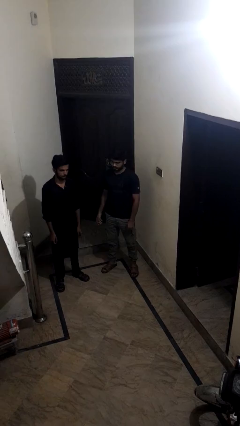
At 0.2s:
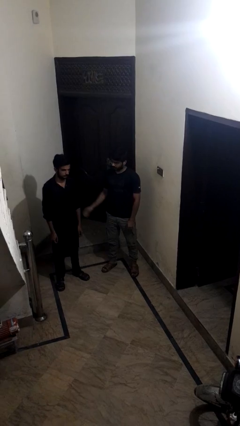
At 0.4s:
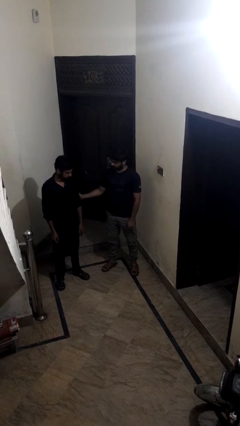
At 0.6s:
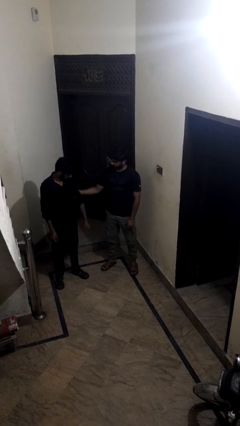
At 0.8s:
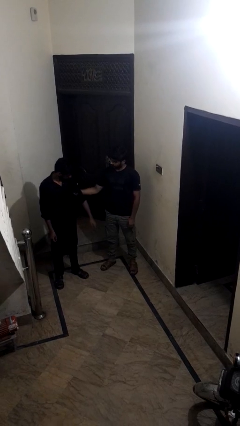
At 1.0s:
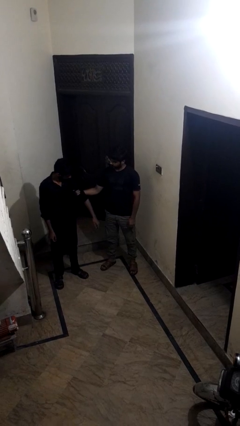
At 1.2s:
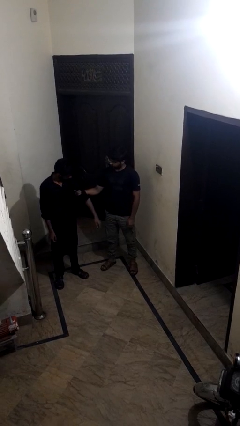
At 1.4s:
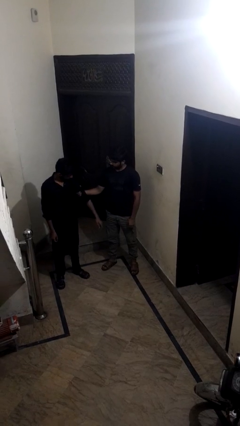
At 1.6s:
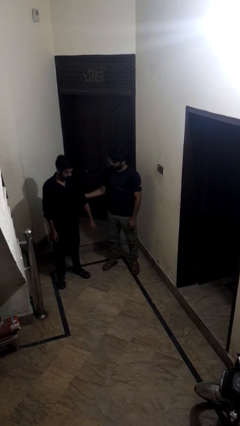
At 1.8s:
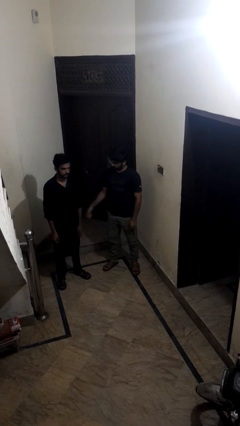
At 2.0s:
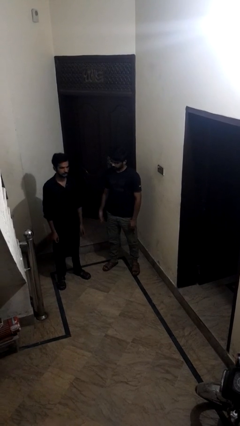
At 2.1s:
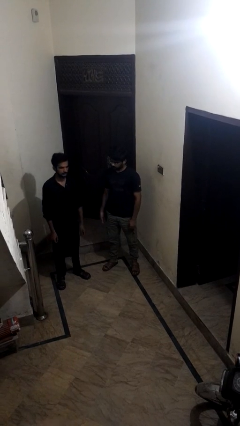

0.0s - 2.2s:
person grabs person by bicep

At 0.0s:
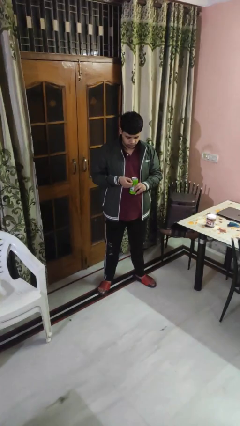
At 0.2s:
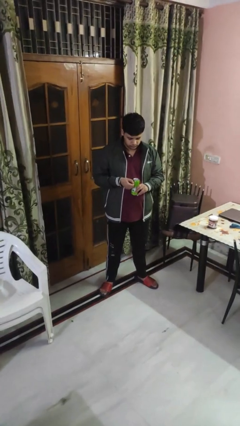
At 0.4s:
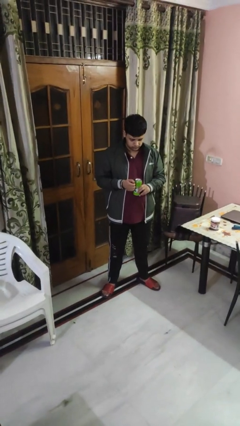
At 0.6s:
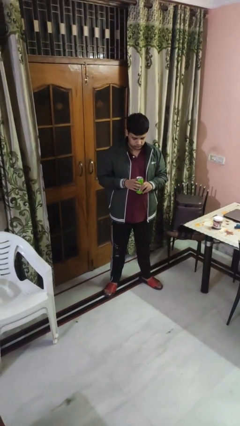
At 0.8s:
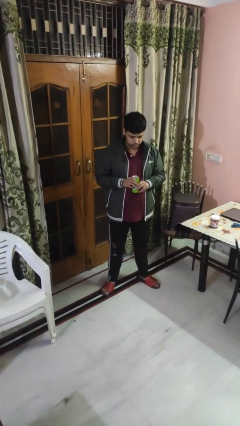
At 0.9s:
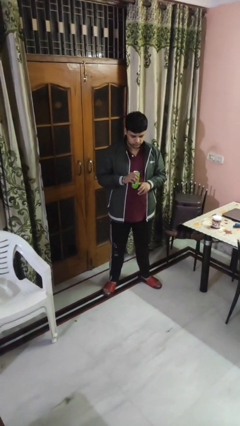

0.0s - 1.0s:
person opens beverage can

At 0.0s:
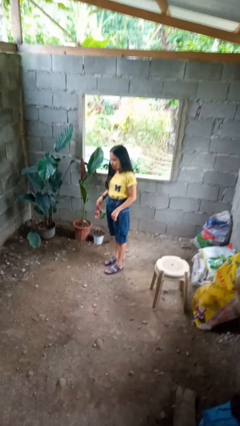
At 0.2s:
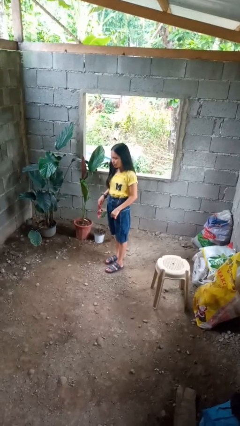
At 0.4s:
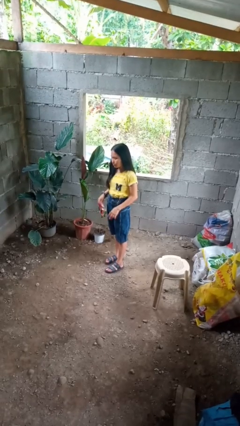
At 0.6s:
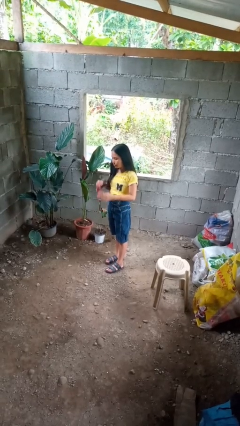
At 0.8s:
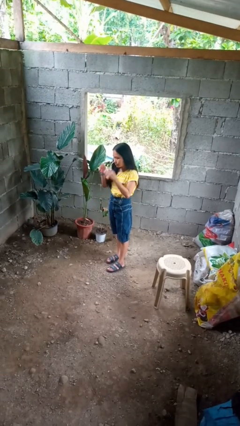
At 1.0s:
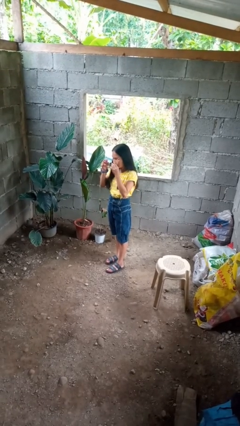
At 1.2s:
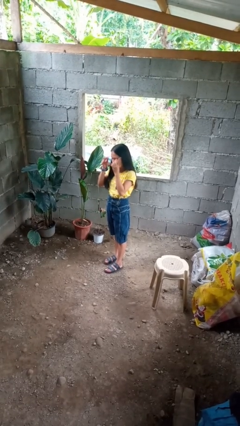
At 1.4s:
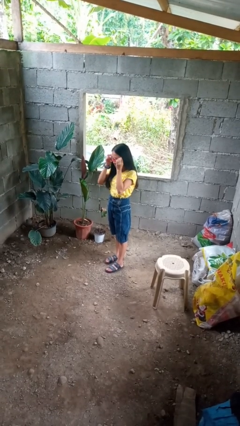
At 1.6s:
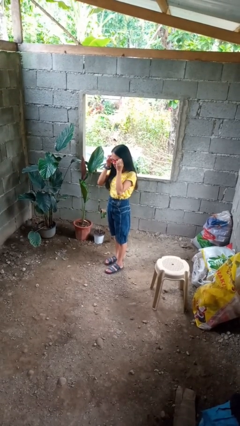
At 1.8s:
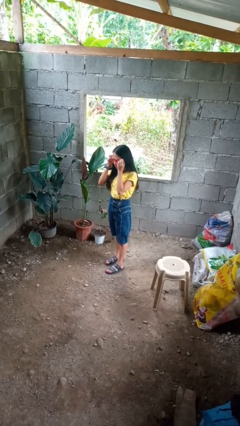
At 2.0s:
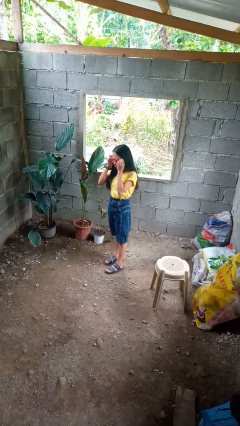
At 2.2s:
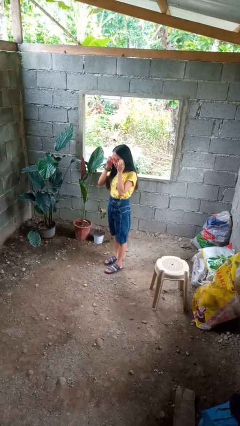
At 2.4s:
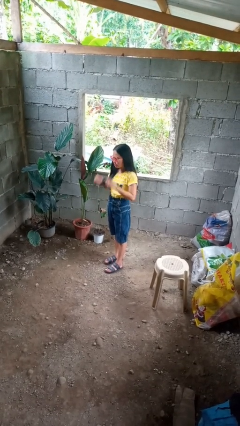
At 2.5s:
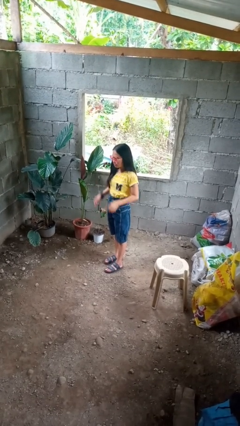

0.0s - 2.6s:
person puts on sunglasses

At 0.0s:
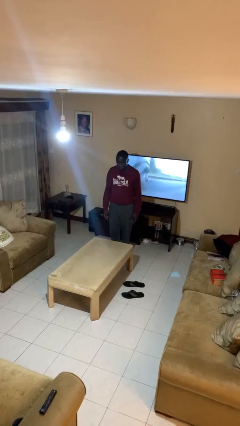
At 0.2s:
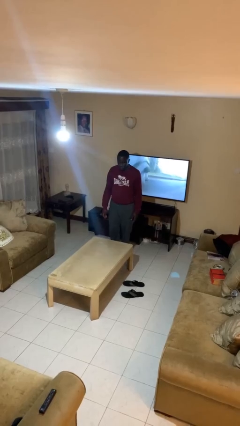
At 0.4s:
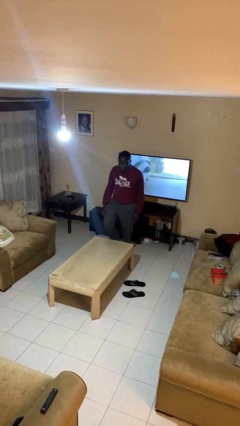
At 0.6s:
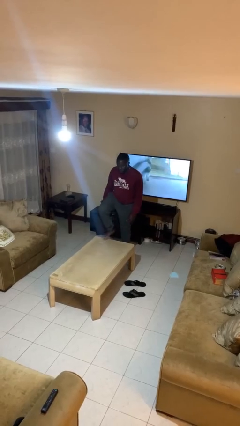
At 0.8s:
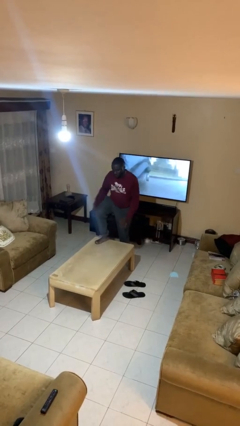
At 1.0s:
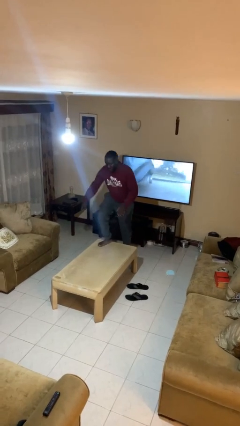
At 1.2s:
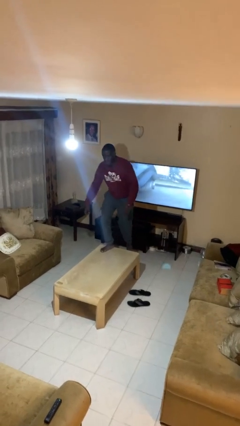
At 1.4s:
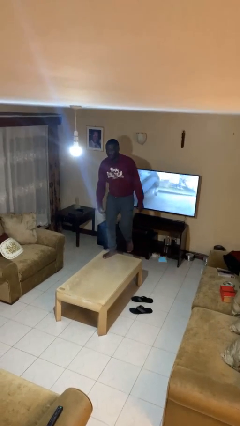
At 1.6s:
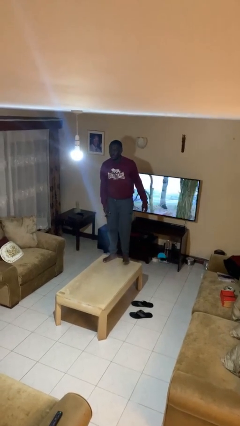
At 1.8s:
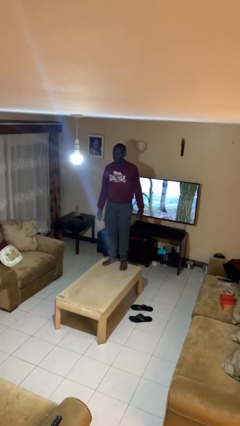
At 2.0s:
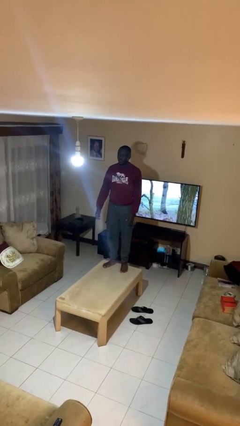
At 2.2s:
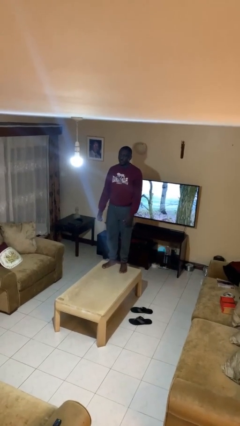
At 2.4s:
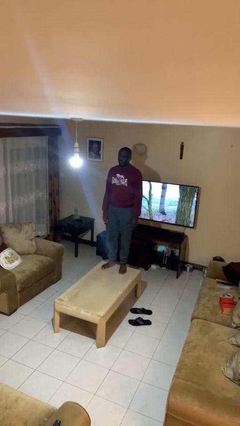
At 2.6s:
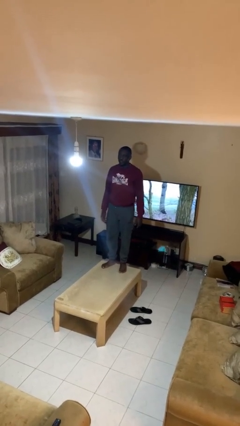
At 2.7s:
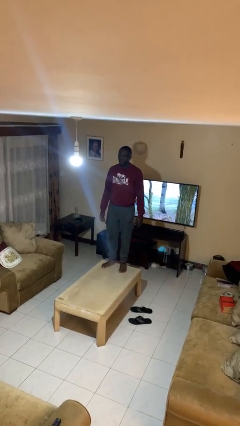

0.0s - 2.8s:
person climbs on table

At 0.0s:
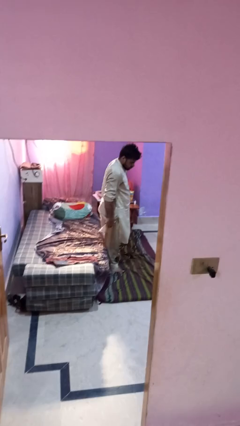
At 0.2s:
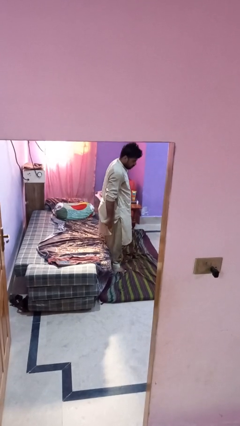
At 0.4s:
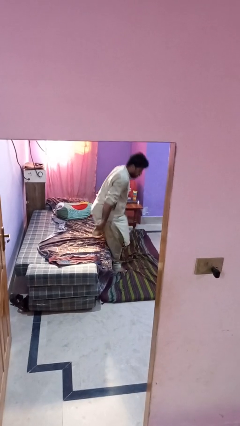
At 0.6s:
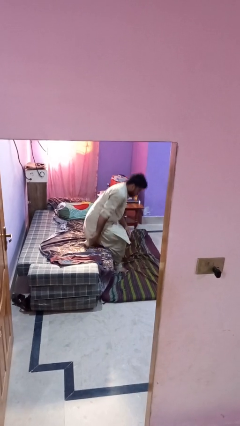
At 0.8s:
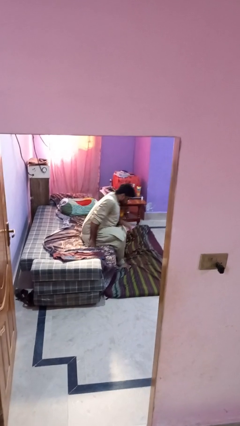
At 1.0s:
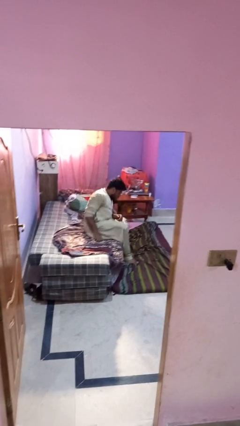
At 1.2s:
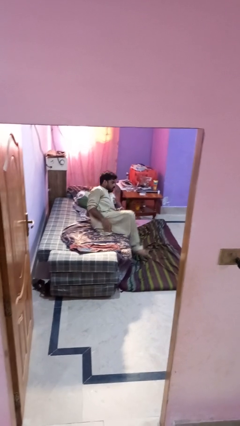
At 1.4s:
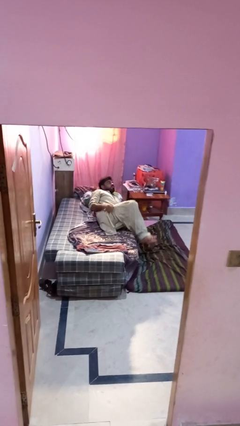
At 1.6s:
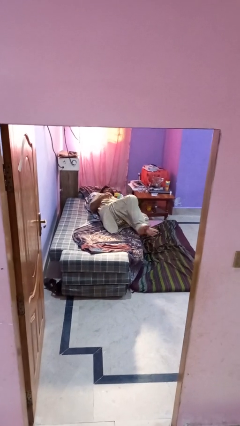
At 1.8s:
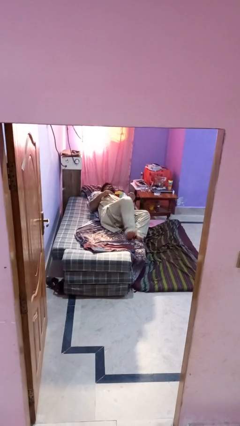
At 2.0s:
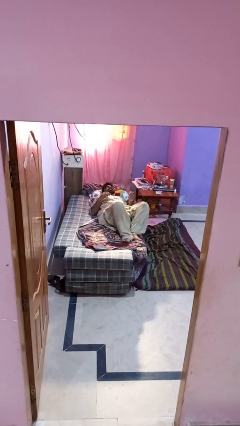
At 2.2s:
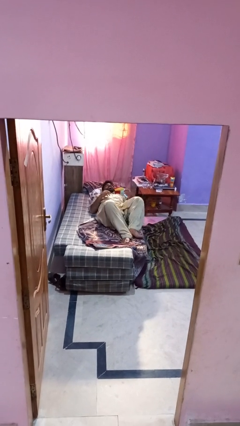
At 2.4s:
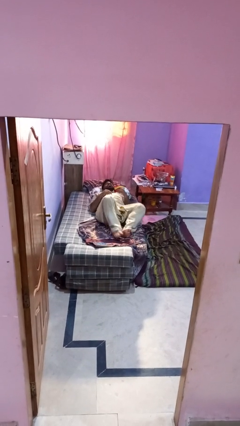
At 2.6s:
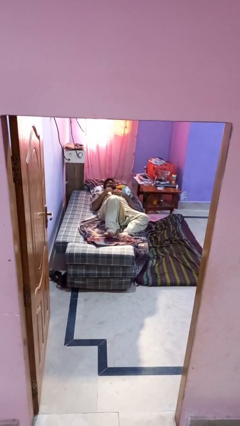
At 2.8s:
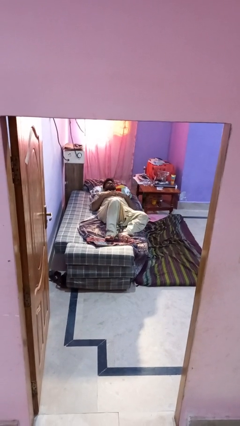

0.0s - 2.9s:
person lies down on bed

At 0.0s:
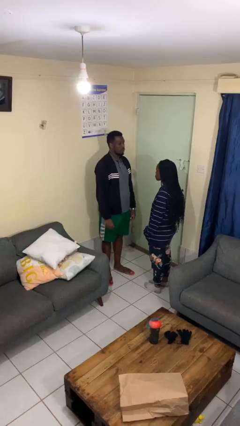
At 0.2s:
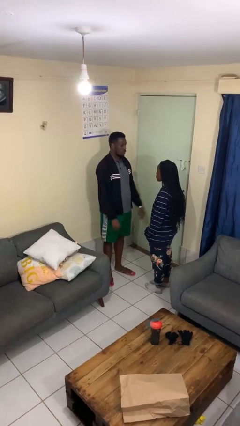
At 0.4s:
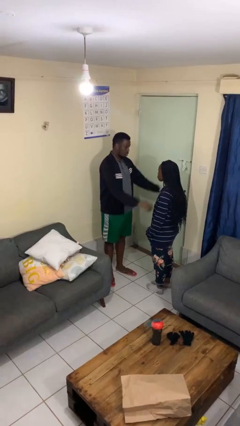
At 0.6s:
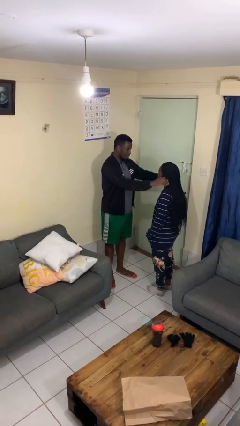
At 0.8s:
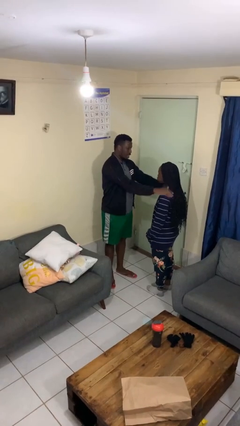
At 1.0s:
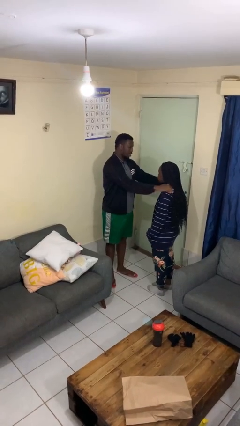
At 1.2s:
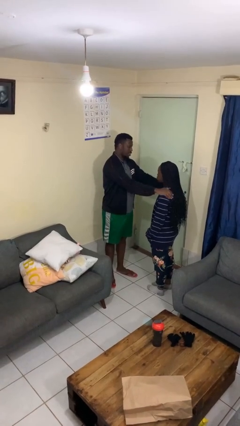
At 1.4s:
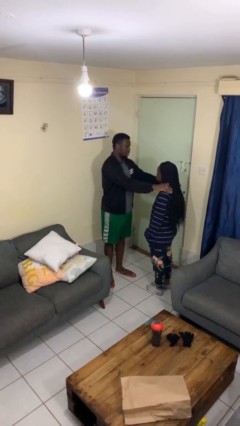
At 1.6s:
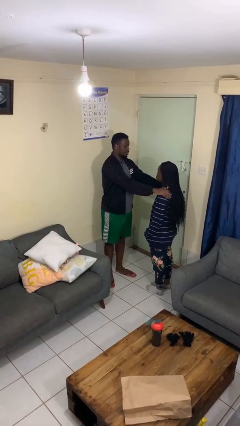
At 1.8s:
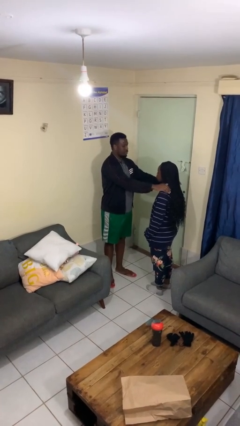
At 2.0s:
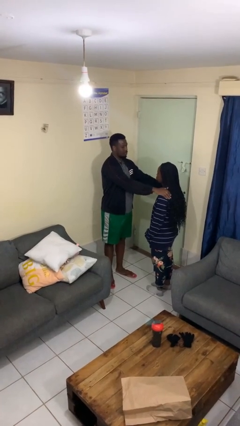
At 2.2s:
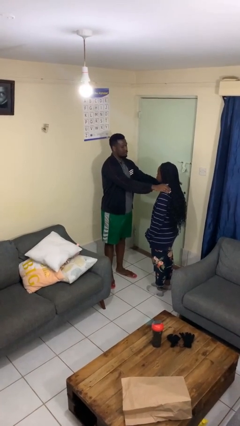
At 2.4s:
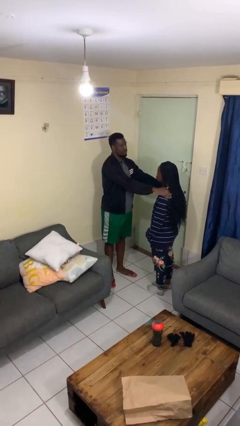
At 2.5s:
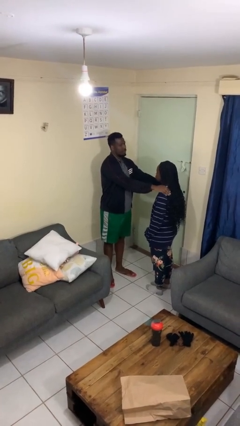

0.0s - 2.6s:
person pounds shoulders of person

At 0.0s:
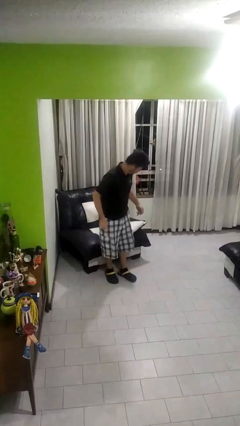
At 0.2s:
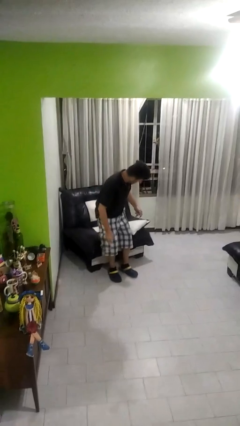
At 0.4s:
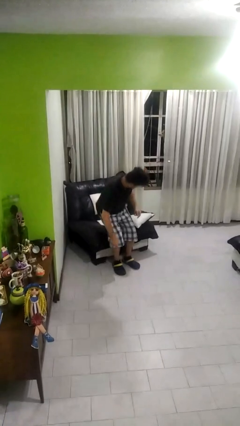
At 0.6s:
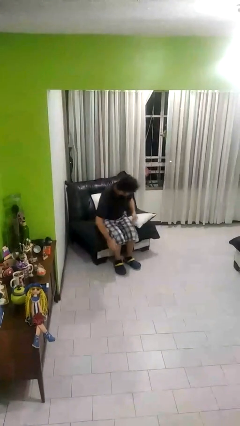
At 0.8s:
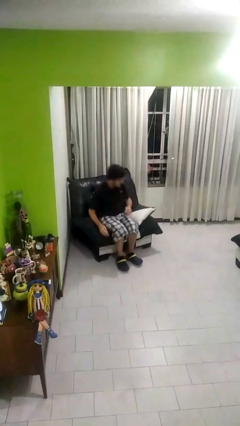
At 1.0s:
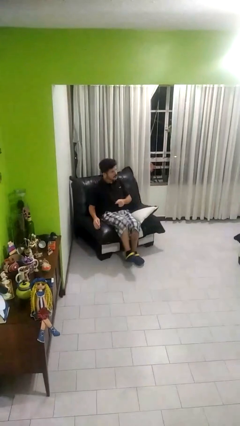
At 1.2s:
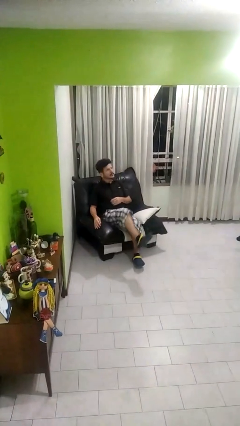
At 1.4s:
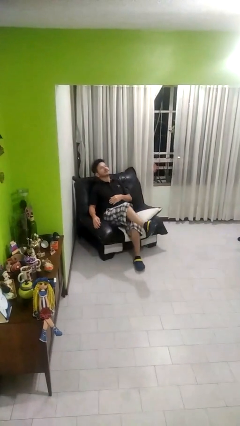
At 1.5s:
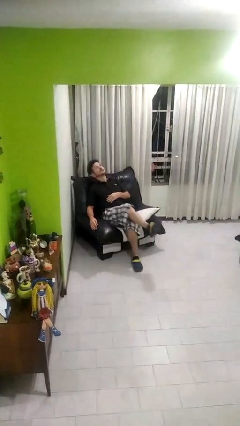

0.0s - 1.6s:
person lies down on couch

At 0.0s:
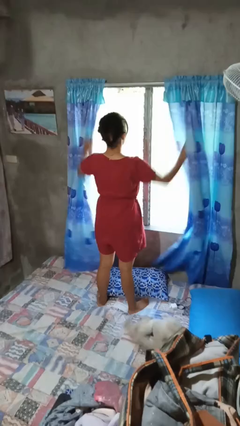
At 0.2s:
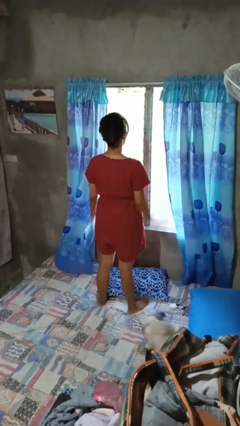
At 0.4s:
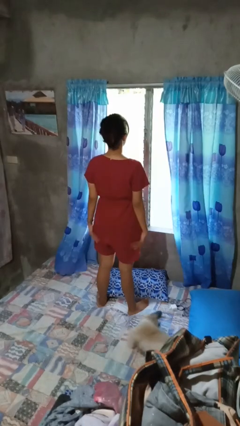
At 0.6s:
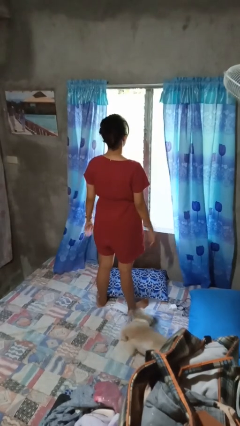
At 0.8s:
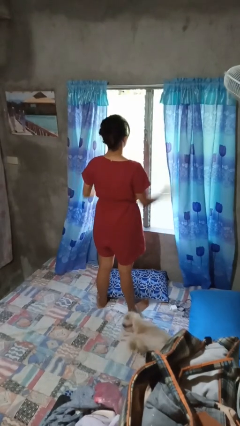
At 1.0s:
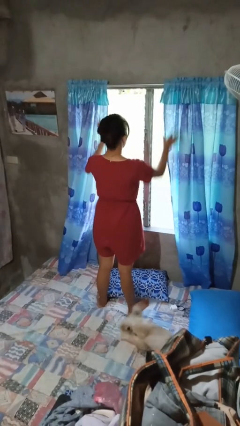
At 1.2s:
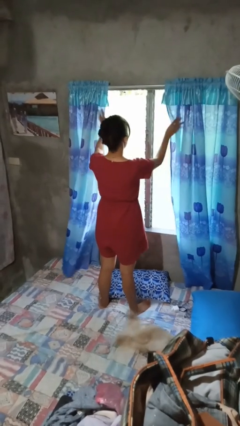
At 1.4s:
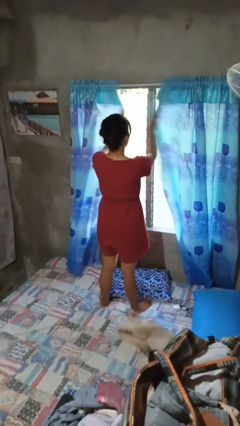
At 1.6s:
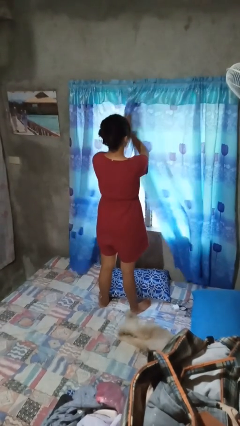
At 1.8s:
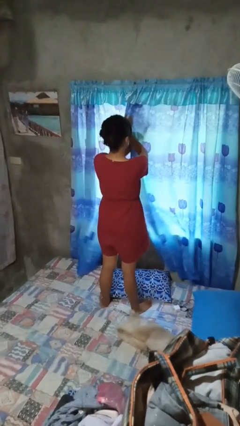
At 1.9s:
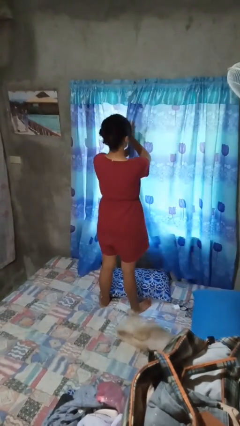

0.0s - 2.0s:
person closes curtains
